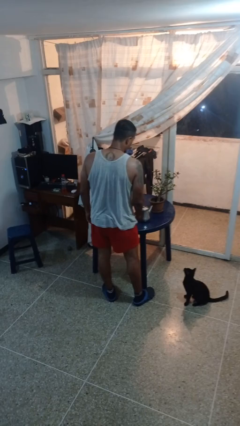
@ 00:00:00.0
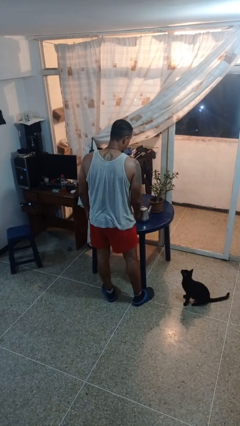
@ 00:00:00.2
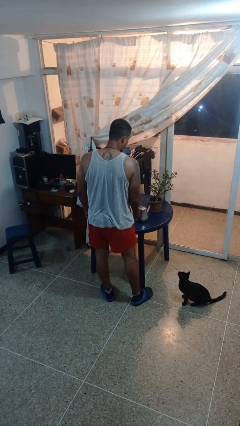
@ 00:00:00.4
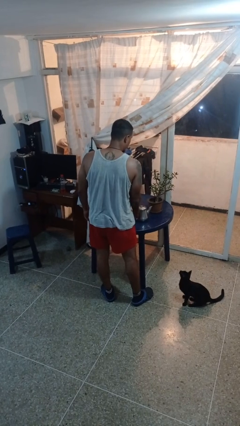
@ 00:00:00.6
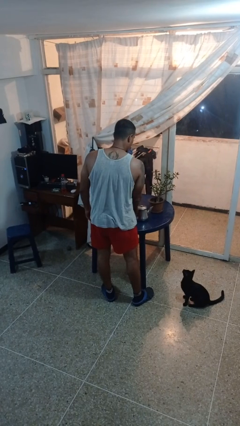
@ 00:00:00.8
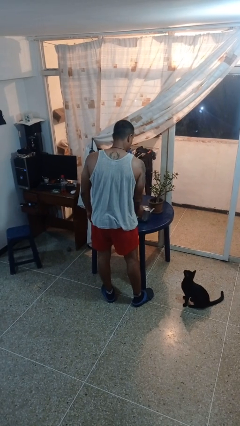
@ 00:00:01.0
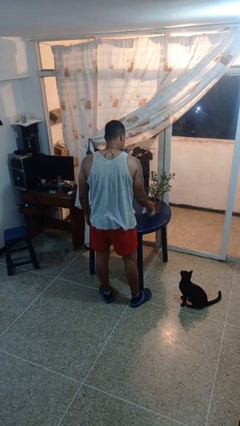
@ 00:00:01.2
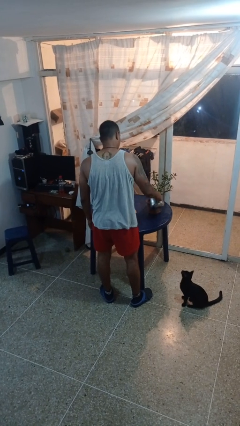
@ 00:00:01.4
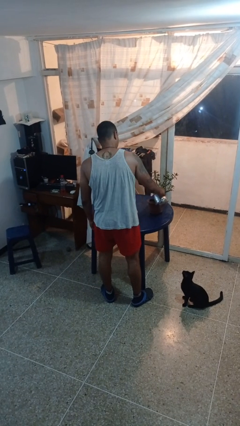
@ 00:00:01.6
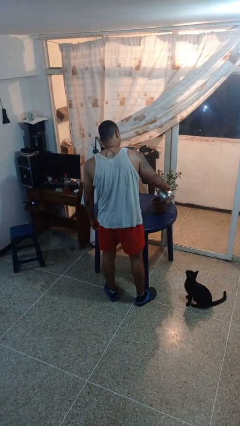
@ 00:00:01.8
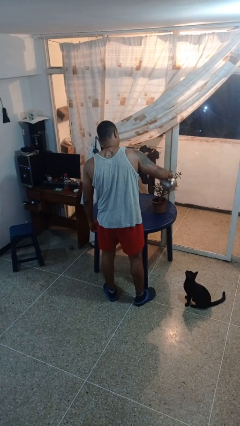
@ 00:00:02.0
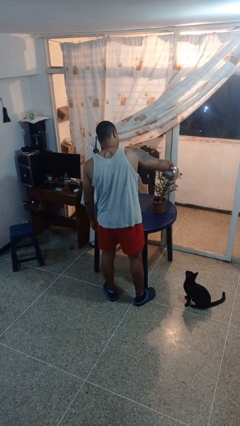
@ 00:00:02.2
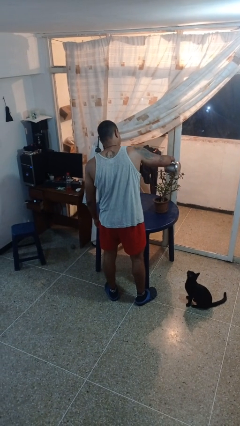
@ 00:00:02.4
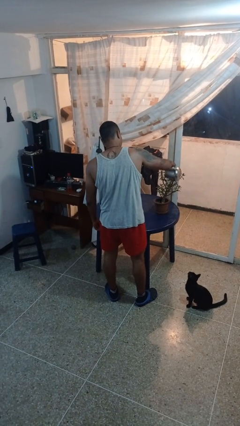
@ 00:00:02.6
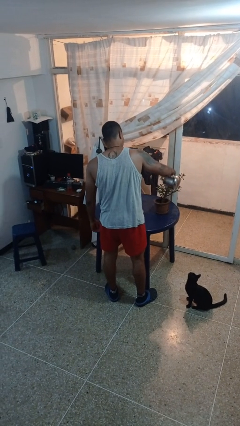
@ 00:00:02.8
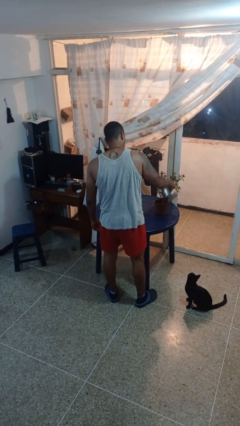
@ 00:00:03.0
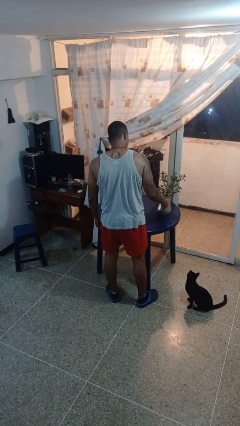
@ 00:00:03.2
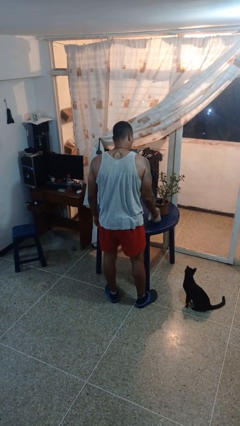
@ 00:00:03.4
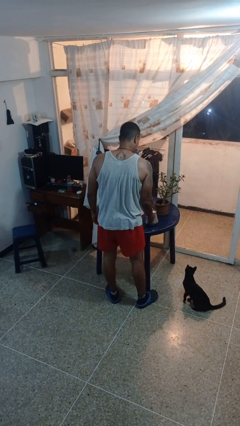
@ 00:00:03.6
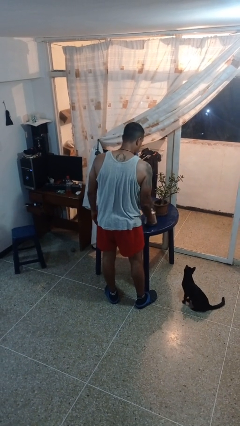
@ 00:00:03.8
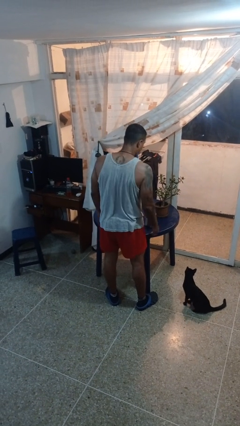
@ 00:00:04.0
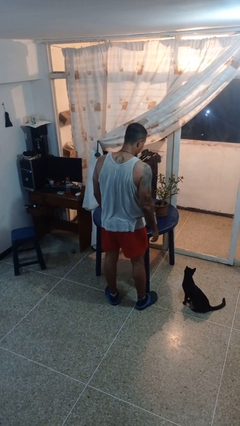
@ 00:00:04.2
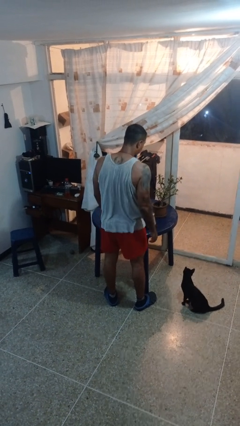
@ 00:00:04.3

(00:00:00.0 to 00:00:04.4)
person waters houseplant

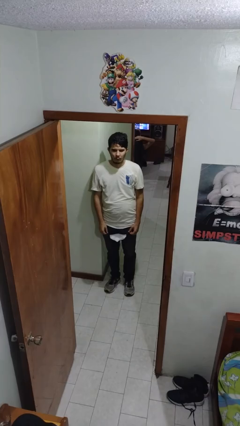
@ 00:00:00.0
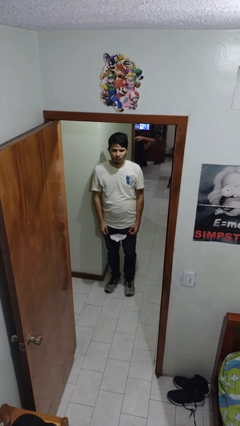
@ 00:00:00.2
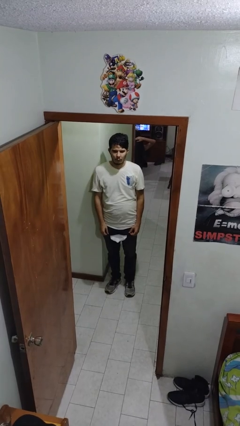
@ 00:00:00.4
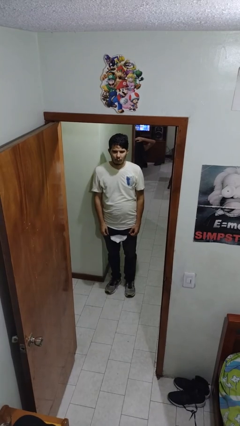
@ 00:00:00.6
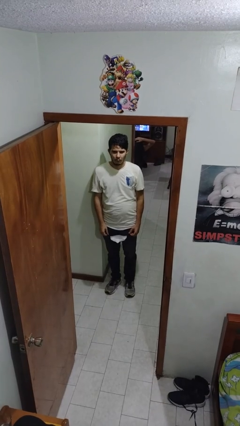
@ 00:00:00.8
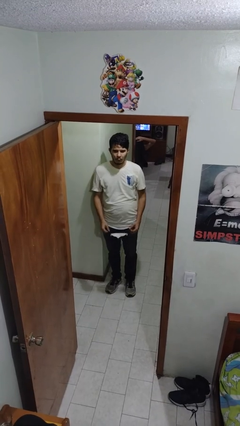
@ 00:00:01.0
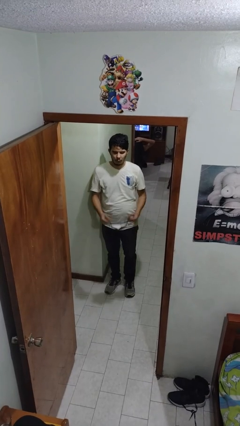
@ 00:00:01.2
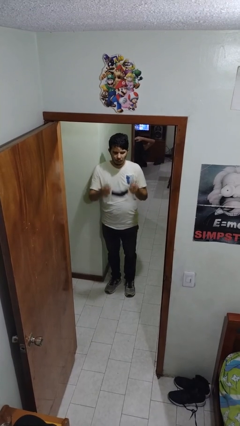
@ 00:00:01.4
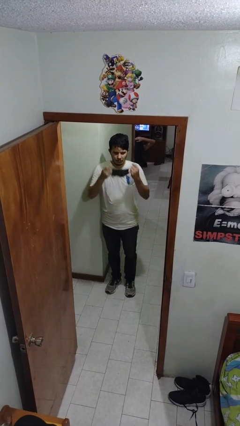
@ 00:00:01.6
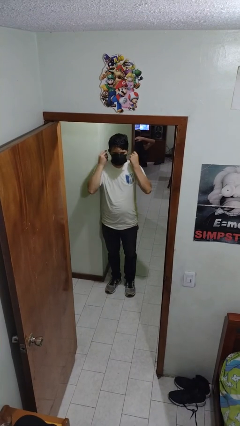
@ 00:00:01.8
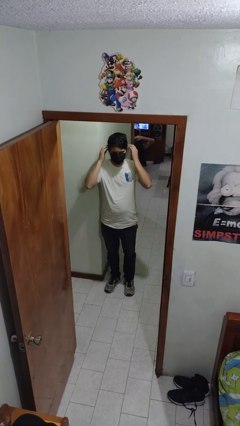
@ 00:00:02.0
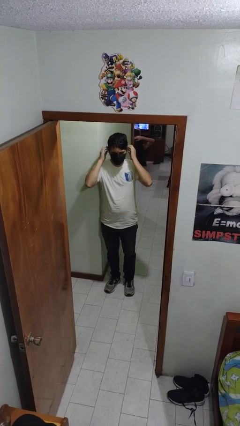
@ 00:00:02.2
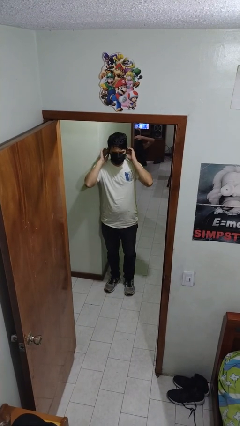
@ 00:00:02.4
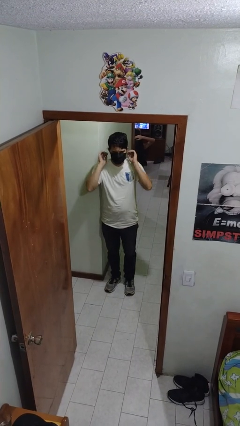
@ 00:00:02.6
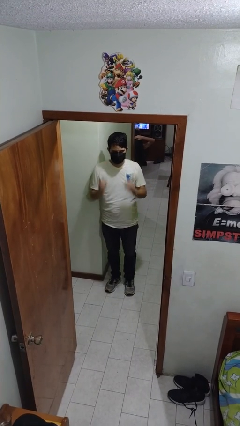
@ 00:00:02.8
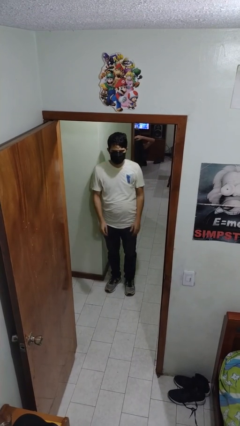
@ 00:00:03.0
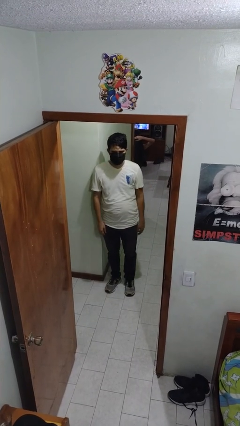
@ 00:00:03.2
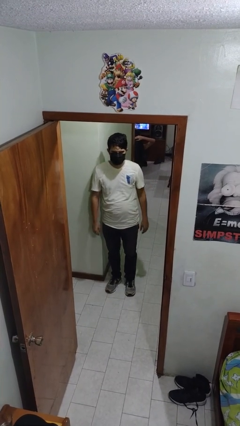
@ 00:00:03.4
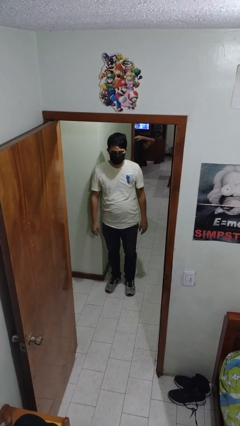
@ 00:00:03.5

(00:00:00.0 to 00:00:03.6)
person puts on facemask

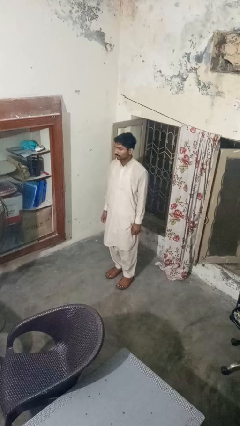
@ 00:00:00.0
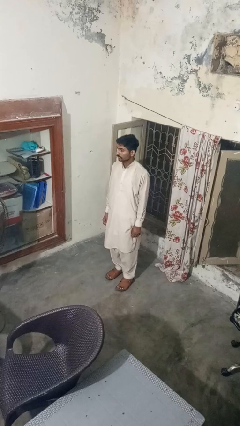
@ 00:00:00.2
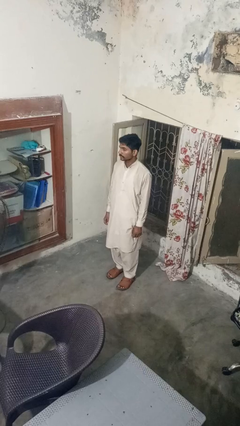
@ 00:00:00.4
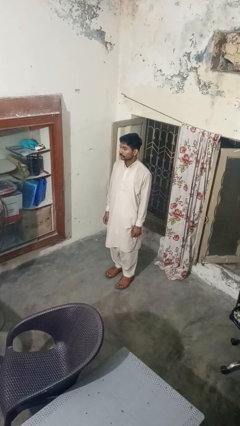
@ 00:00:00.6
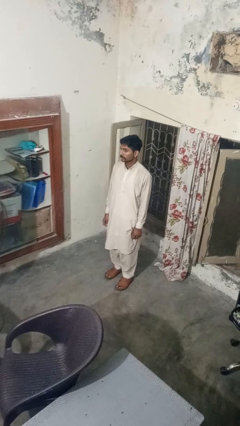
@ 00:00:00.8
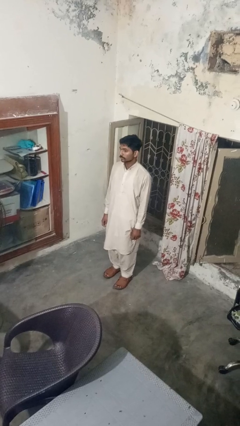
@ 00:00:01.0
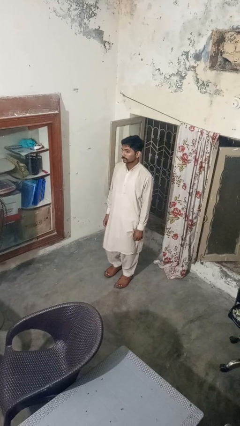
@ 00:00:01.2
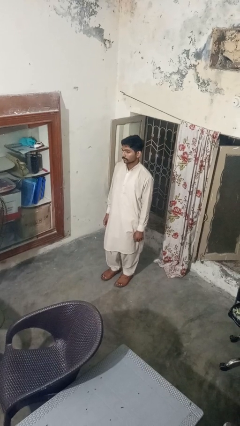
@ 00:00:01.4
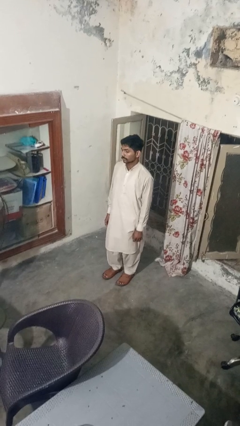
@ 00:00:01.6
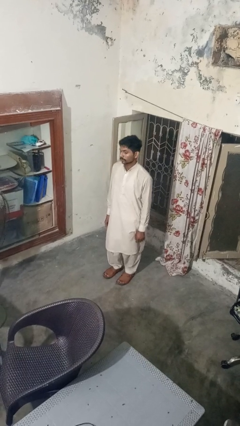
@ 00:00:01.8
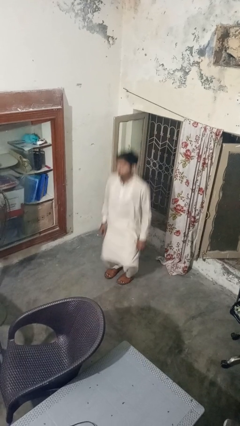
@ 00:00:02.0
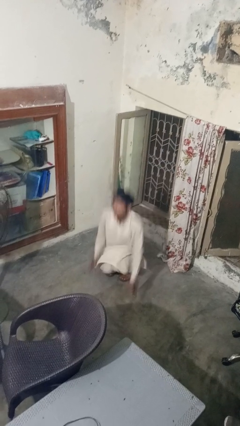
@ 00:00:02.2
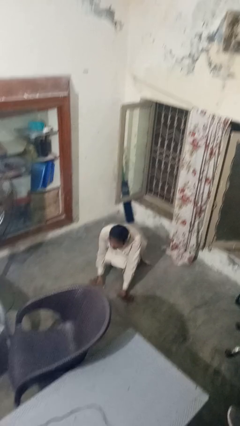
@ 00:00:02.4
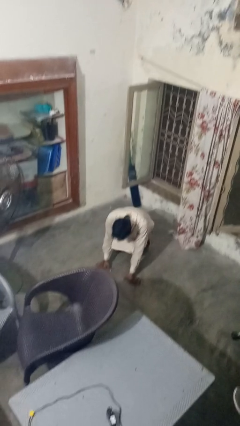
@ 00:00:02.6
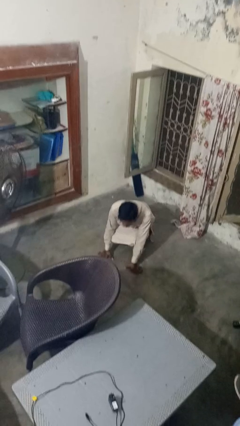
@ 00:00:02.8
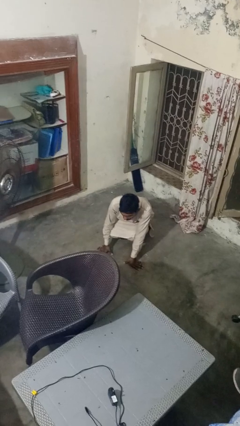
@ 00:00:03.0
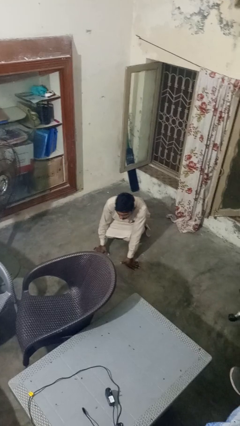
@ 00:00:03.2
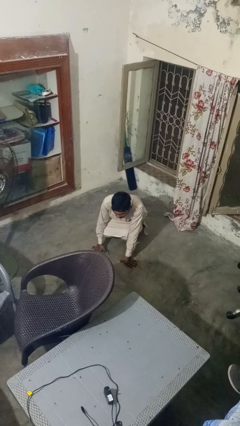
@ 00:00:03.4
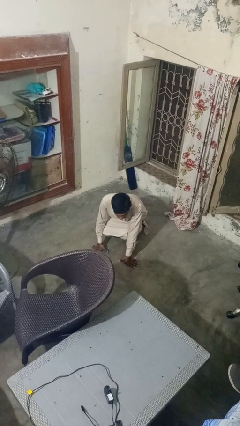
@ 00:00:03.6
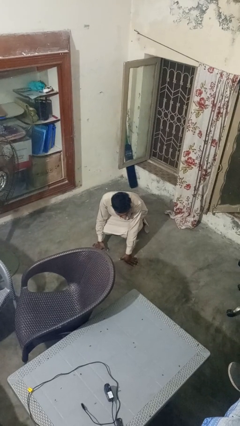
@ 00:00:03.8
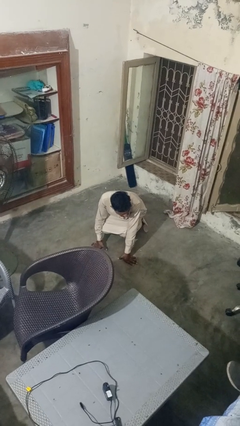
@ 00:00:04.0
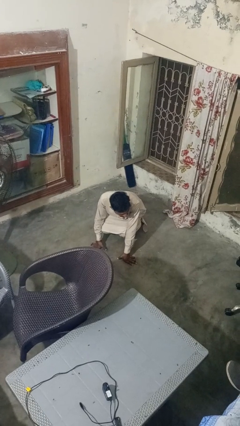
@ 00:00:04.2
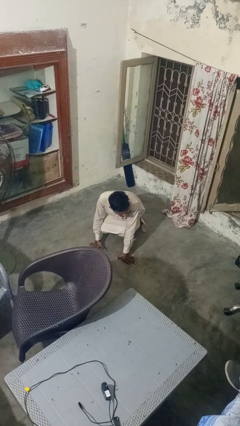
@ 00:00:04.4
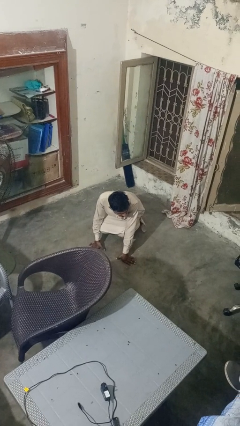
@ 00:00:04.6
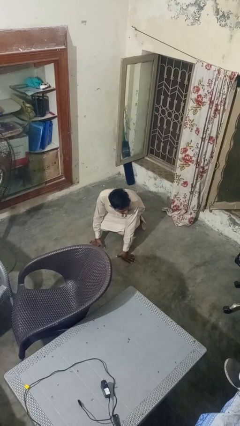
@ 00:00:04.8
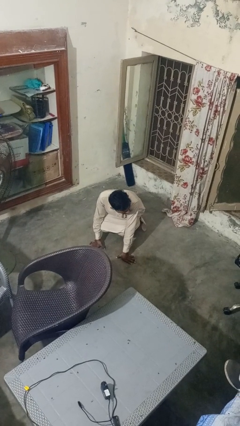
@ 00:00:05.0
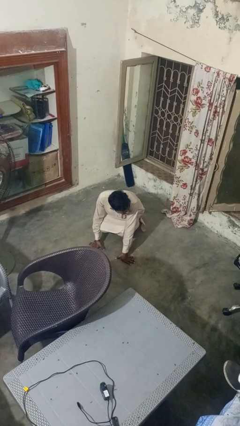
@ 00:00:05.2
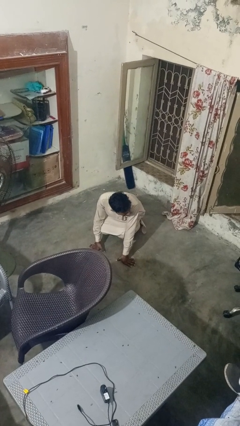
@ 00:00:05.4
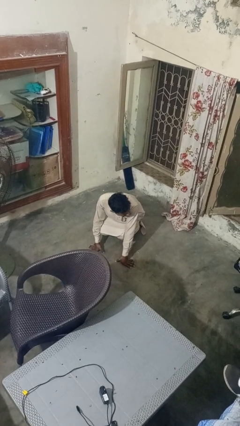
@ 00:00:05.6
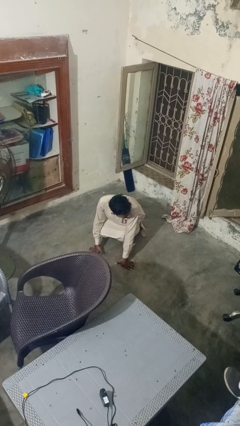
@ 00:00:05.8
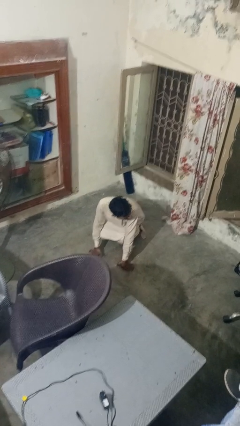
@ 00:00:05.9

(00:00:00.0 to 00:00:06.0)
person falls while standing

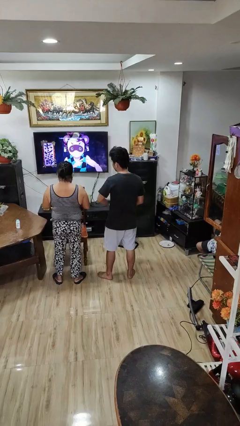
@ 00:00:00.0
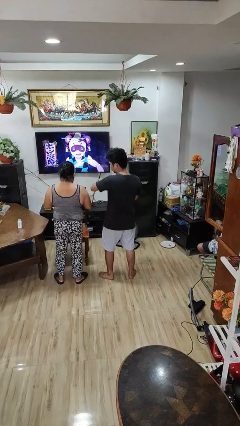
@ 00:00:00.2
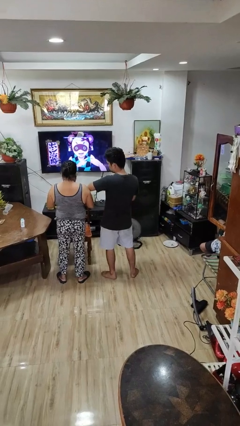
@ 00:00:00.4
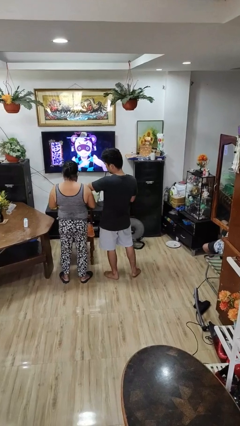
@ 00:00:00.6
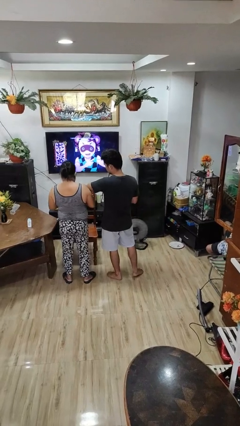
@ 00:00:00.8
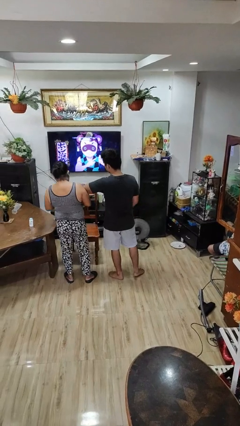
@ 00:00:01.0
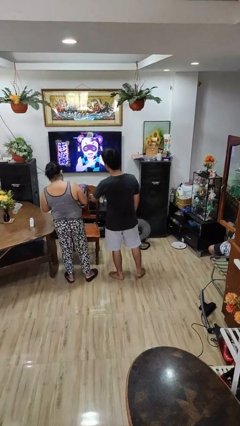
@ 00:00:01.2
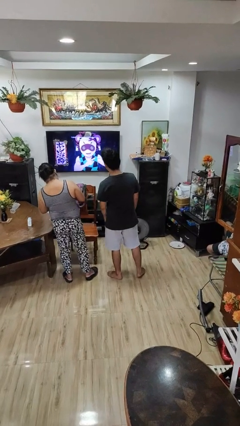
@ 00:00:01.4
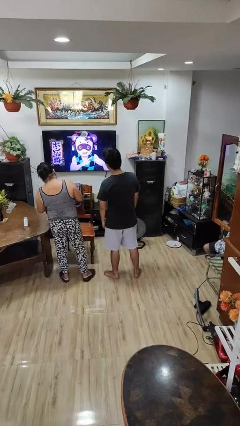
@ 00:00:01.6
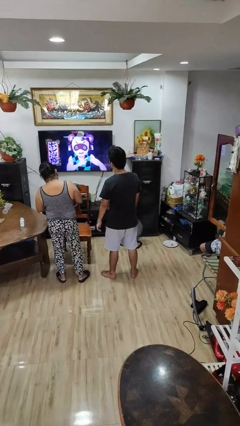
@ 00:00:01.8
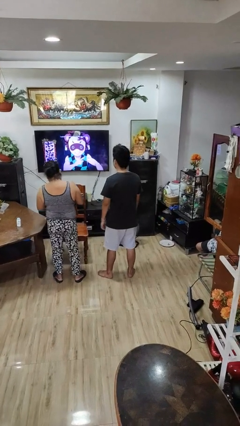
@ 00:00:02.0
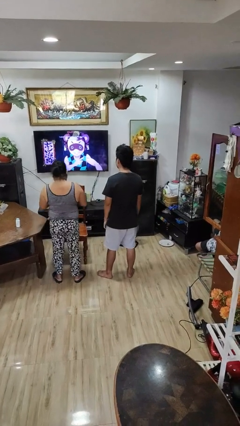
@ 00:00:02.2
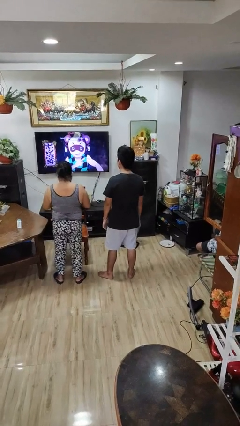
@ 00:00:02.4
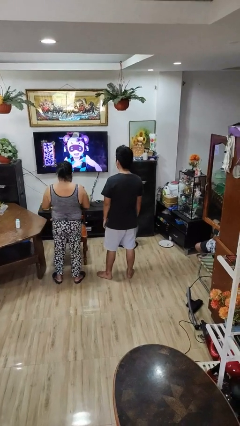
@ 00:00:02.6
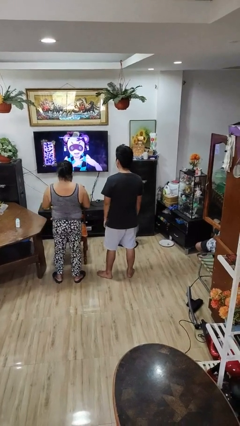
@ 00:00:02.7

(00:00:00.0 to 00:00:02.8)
person shoves person

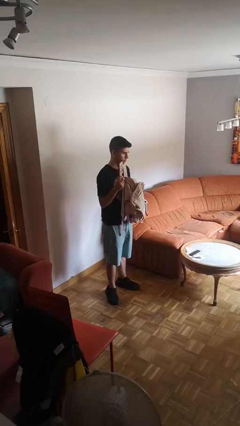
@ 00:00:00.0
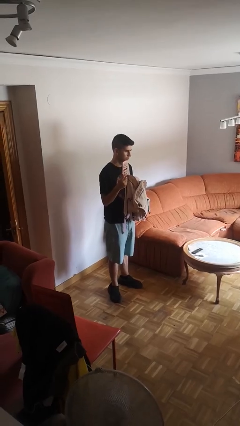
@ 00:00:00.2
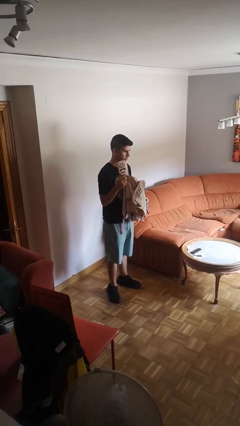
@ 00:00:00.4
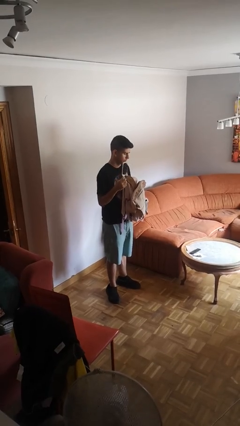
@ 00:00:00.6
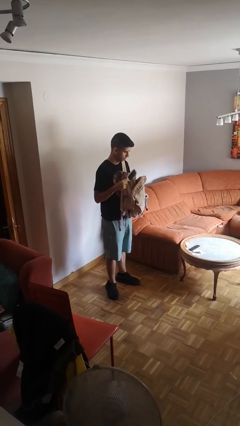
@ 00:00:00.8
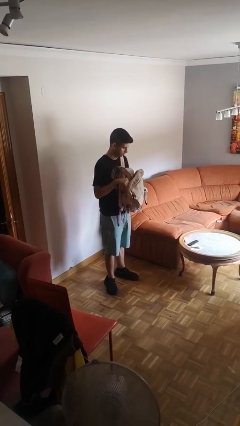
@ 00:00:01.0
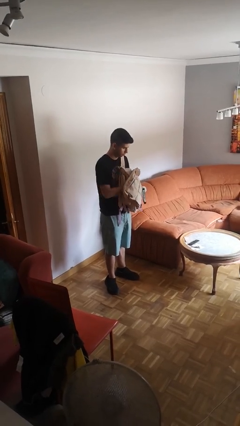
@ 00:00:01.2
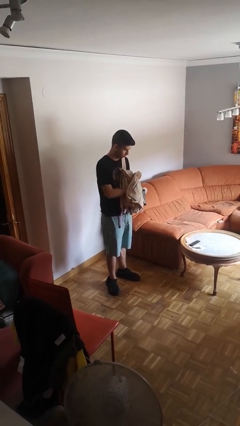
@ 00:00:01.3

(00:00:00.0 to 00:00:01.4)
person puts object into backpack
